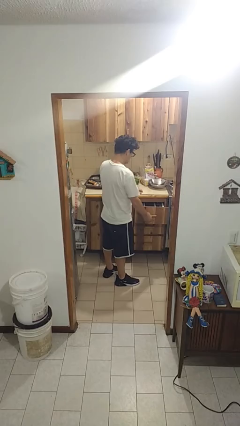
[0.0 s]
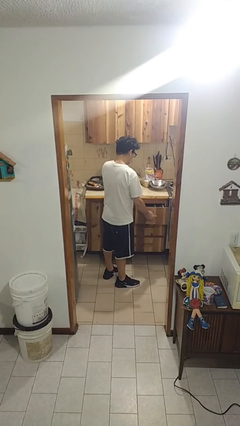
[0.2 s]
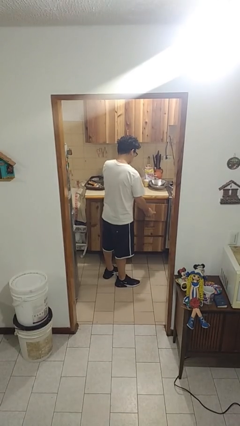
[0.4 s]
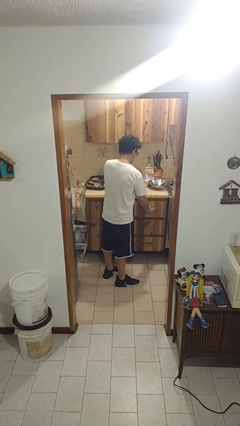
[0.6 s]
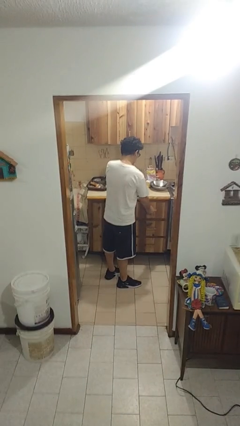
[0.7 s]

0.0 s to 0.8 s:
person closes kitchen drawer

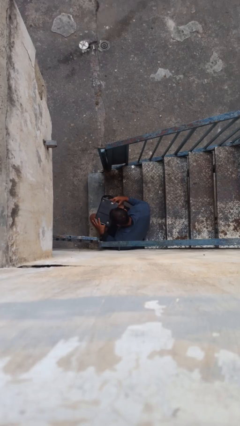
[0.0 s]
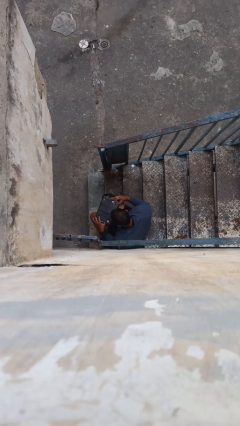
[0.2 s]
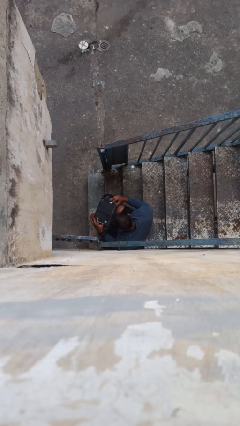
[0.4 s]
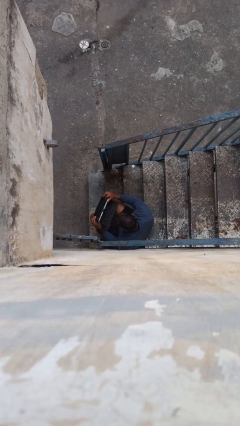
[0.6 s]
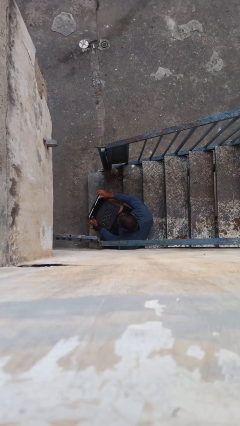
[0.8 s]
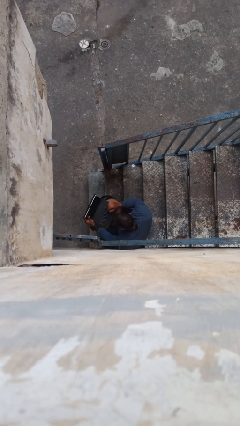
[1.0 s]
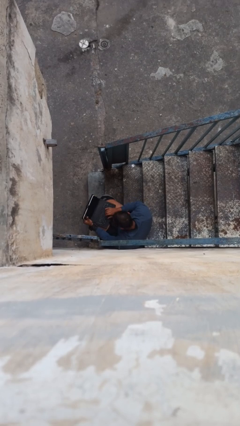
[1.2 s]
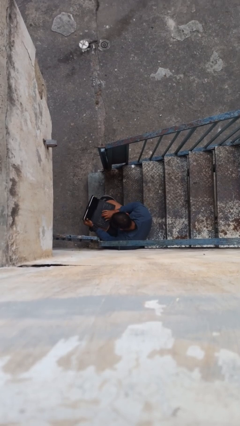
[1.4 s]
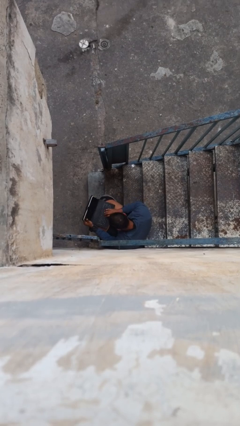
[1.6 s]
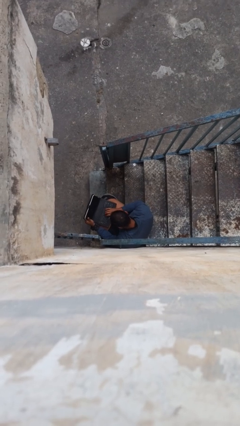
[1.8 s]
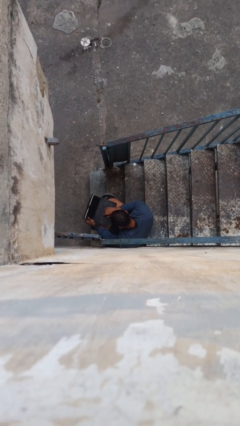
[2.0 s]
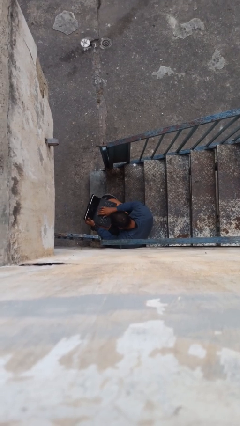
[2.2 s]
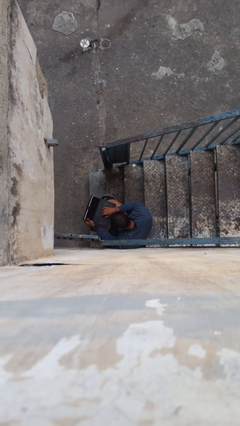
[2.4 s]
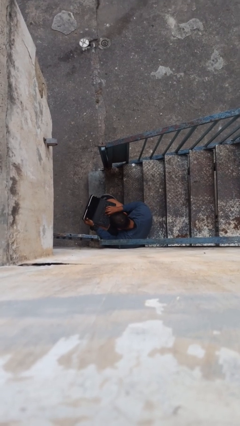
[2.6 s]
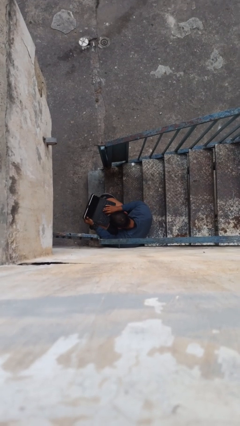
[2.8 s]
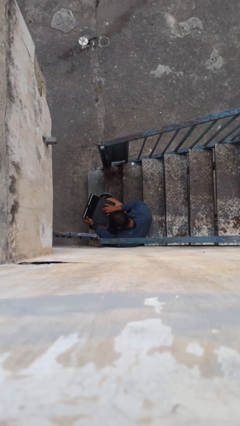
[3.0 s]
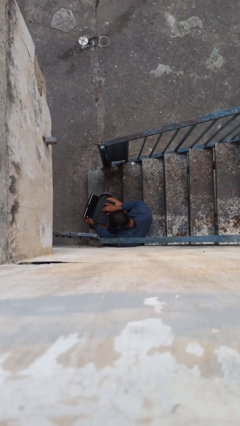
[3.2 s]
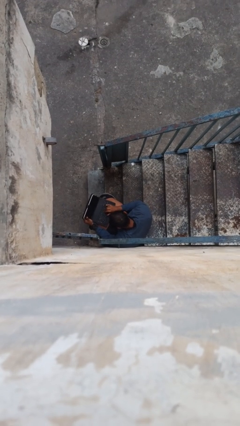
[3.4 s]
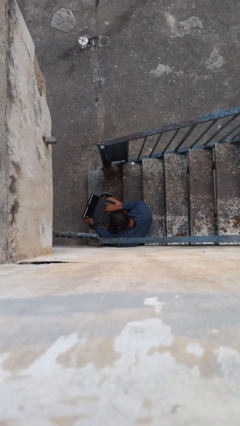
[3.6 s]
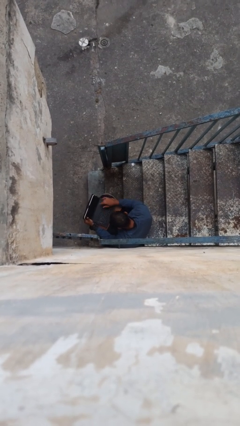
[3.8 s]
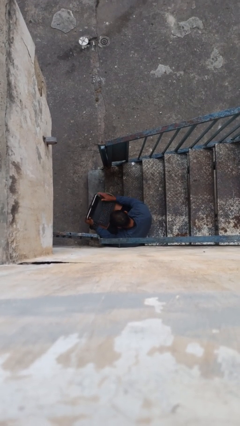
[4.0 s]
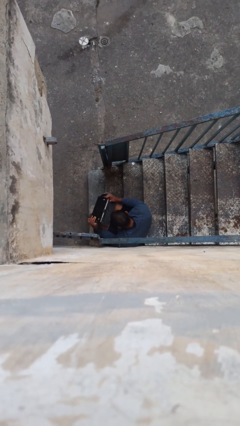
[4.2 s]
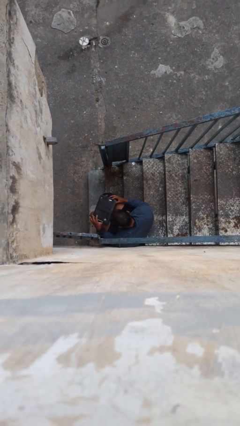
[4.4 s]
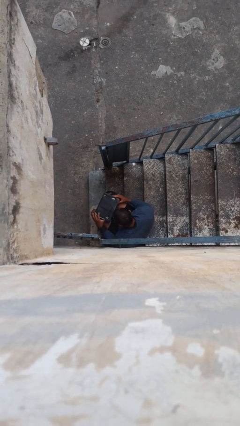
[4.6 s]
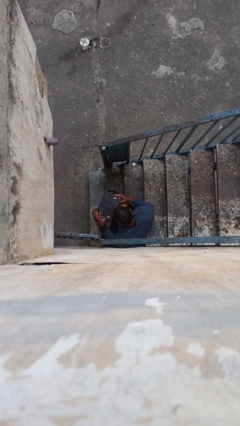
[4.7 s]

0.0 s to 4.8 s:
person interacts with laptop

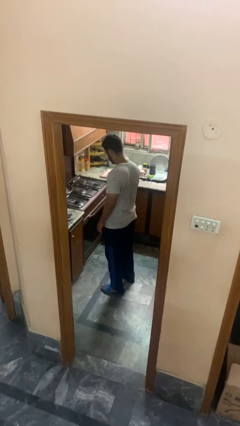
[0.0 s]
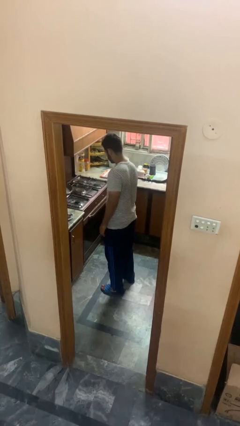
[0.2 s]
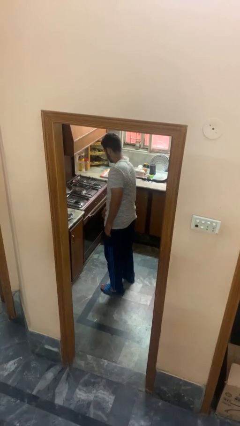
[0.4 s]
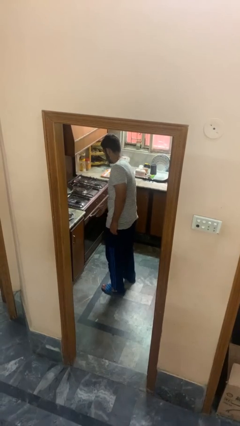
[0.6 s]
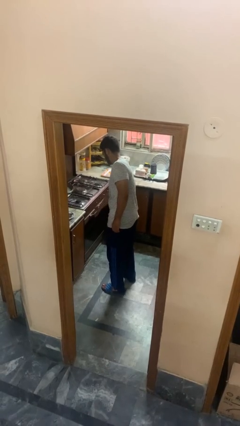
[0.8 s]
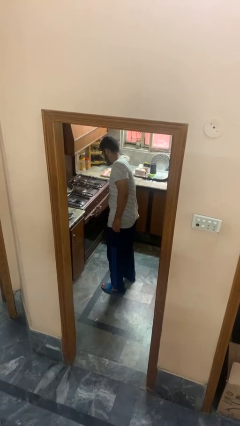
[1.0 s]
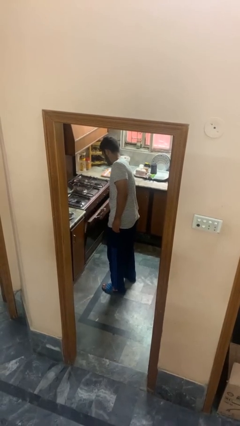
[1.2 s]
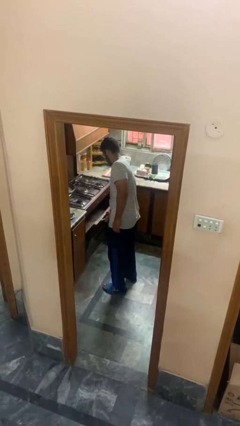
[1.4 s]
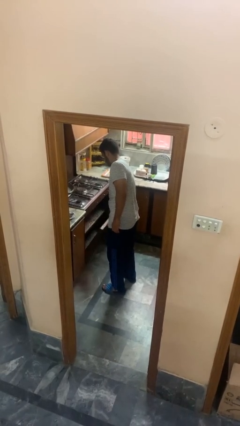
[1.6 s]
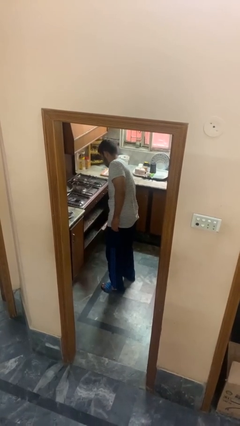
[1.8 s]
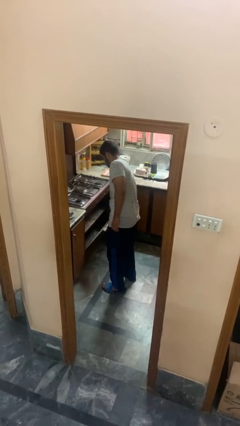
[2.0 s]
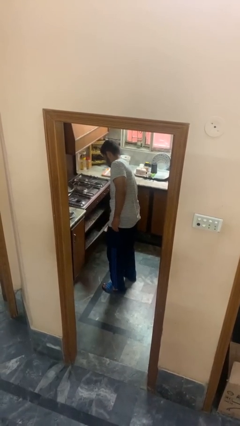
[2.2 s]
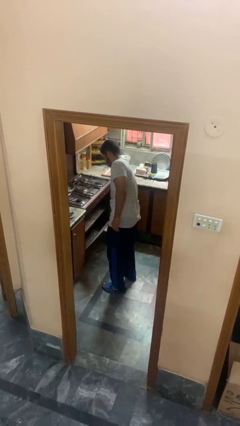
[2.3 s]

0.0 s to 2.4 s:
person opens oven door

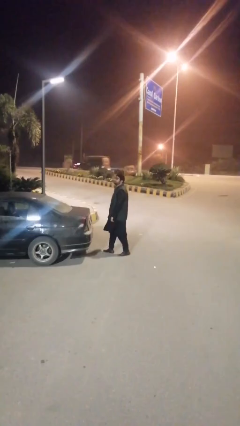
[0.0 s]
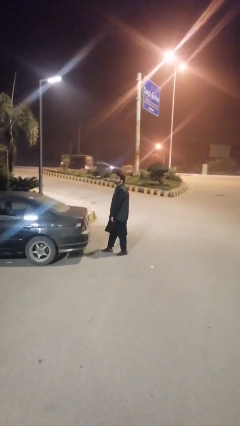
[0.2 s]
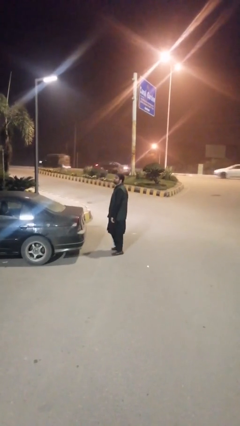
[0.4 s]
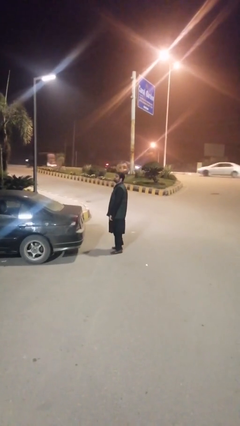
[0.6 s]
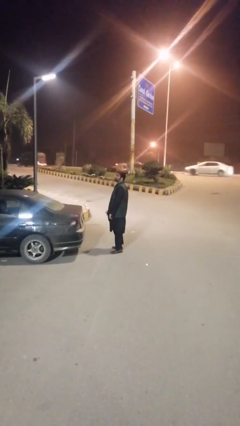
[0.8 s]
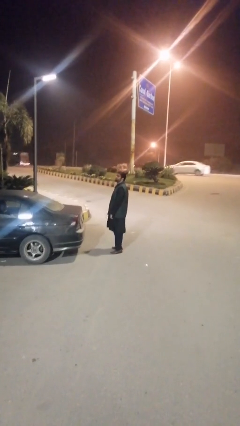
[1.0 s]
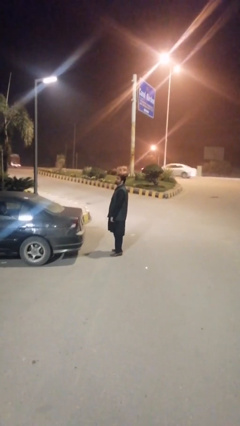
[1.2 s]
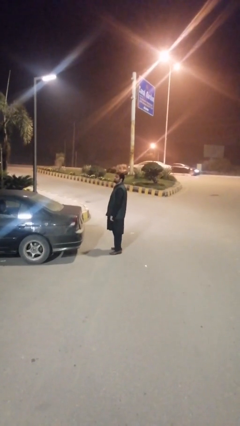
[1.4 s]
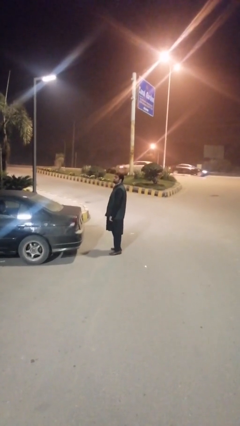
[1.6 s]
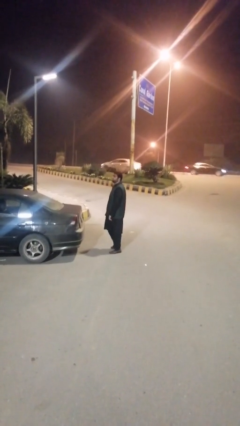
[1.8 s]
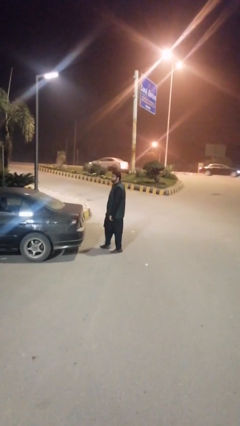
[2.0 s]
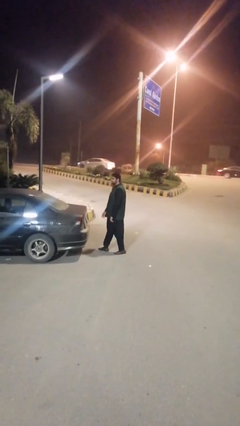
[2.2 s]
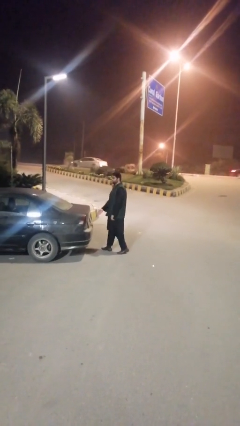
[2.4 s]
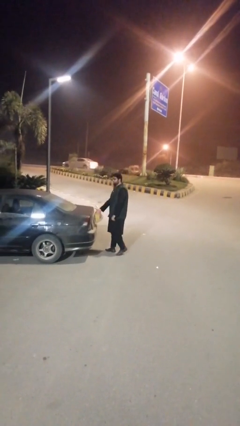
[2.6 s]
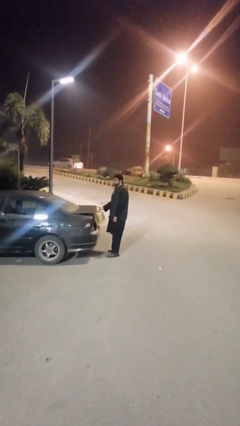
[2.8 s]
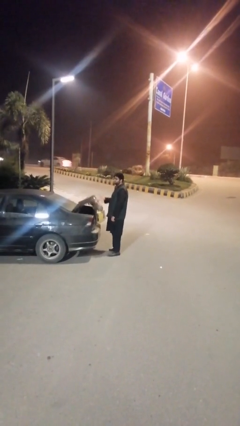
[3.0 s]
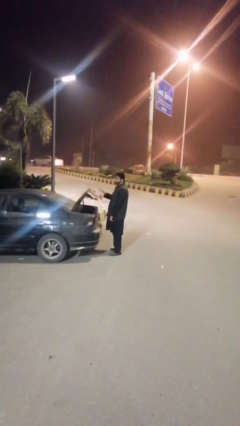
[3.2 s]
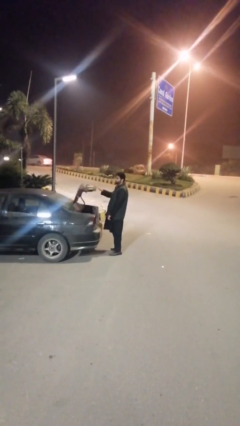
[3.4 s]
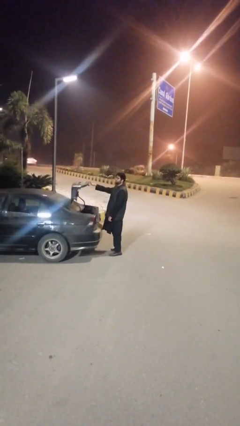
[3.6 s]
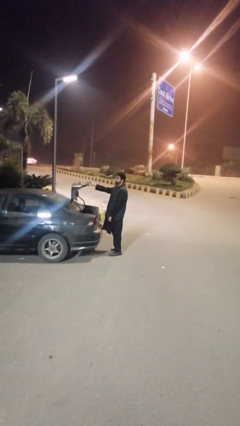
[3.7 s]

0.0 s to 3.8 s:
person closes car trunk

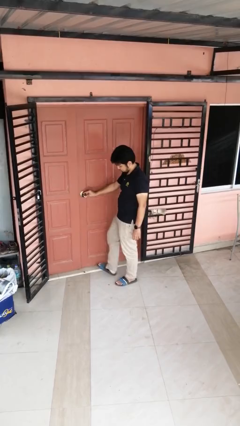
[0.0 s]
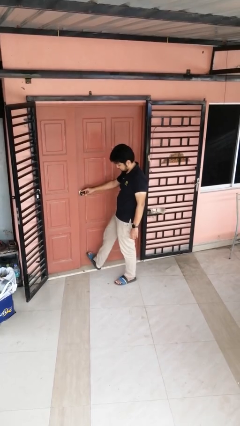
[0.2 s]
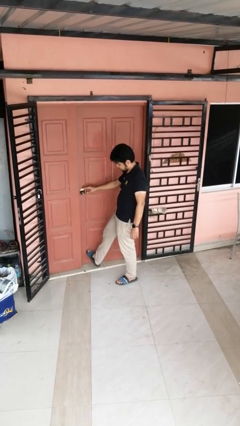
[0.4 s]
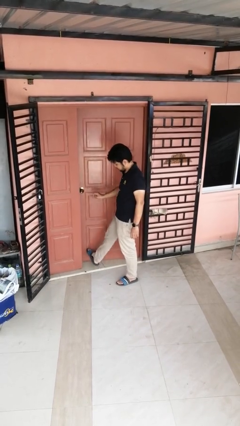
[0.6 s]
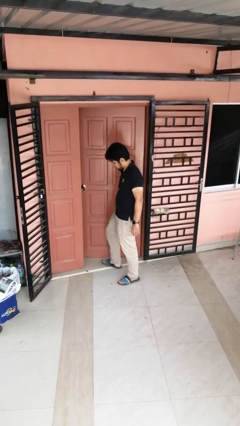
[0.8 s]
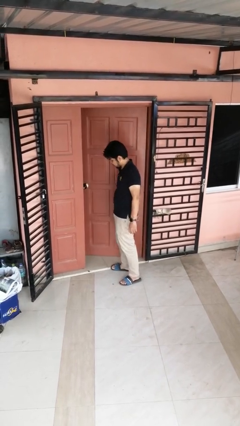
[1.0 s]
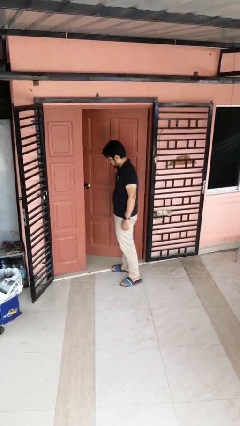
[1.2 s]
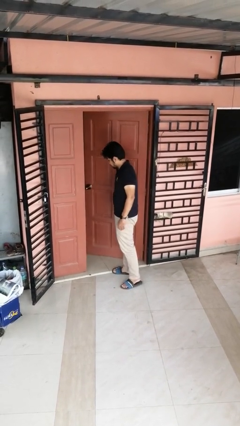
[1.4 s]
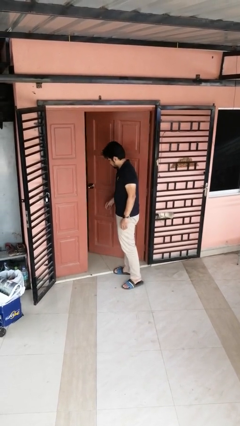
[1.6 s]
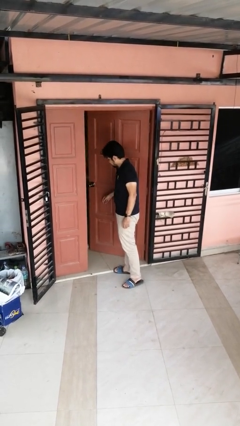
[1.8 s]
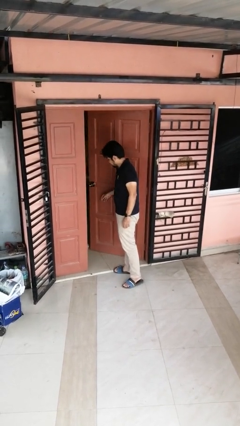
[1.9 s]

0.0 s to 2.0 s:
person opens facility door

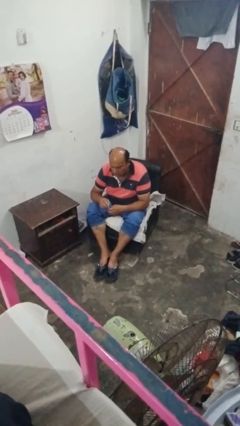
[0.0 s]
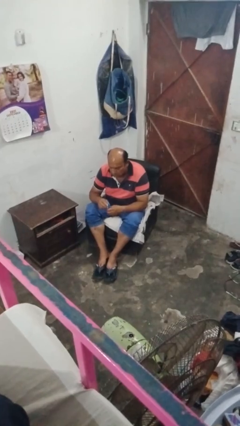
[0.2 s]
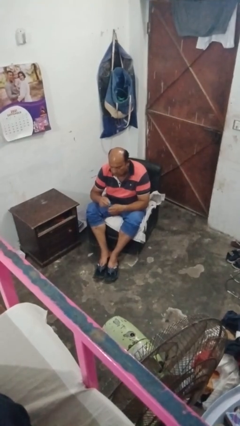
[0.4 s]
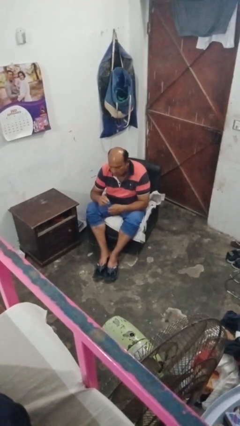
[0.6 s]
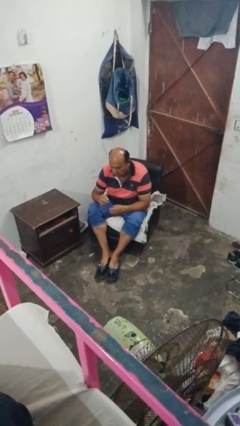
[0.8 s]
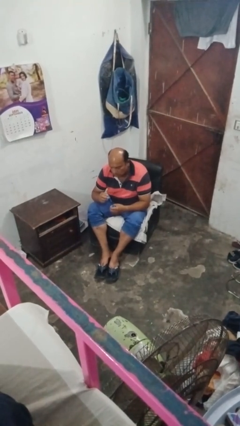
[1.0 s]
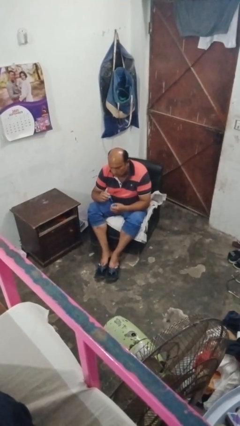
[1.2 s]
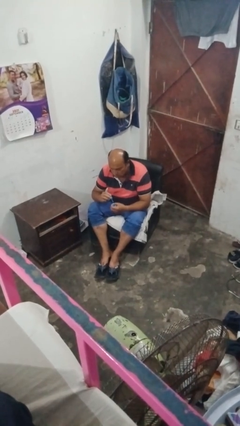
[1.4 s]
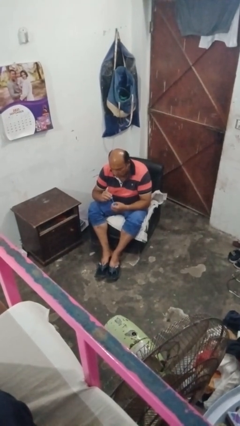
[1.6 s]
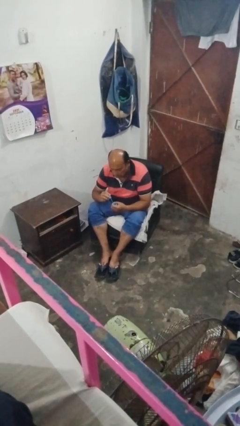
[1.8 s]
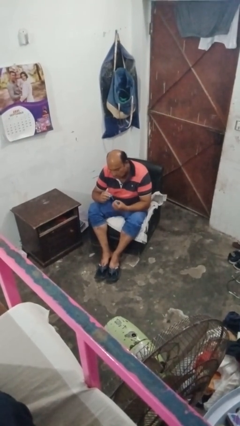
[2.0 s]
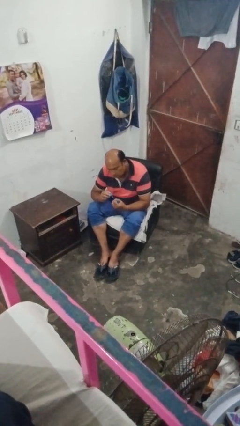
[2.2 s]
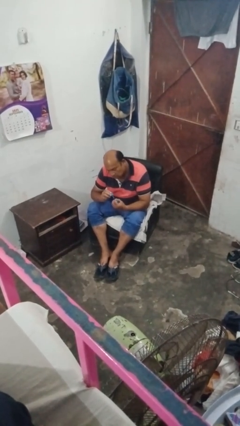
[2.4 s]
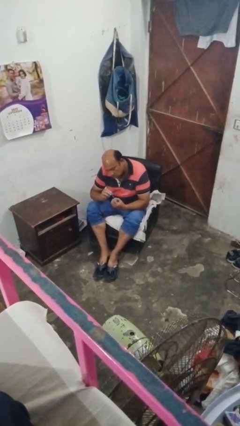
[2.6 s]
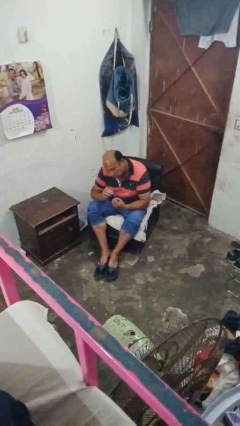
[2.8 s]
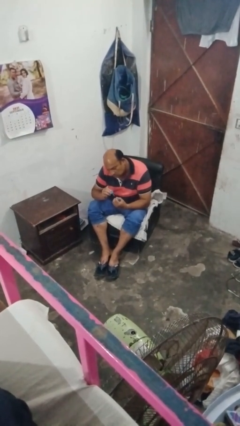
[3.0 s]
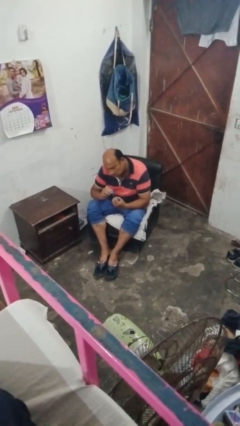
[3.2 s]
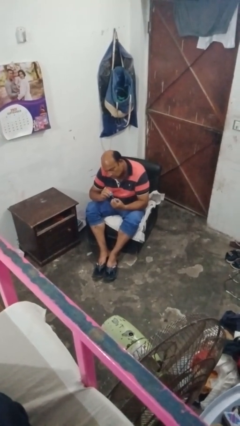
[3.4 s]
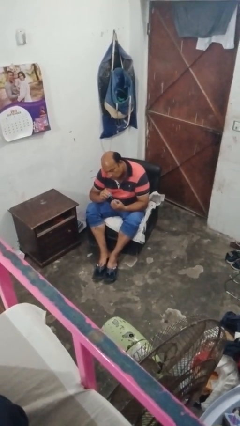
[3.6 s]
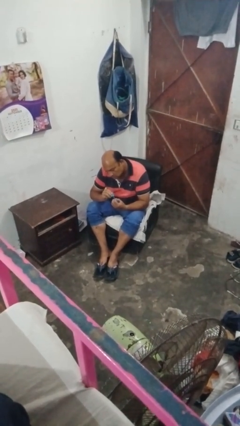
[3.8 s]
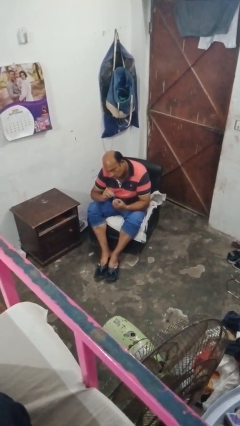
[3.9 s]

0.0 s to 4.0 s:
person paints fingernails
